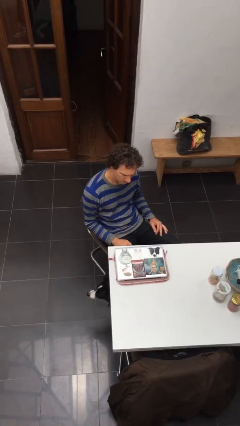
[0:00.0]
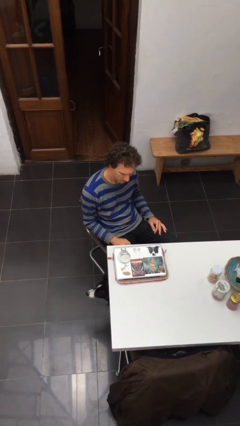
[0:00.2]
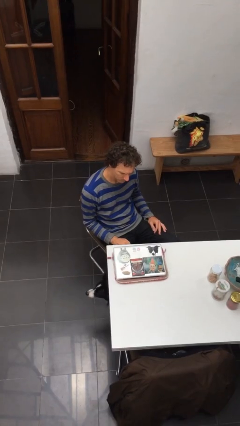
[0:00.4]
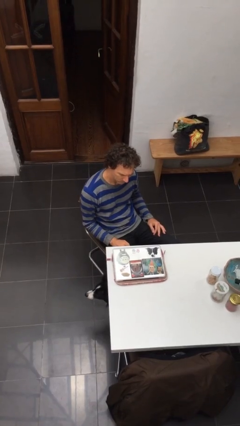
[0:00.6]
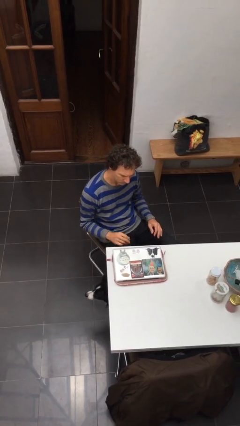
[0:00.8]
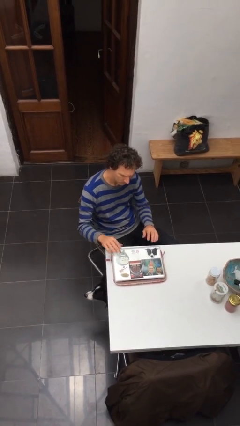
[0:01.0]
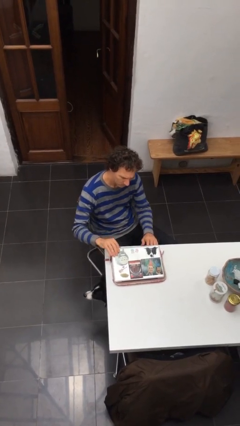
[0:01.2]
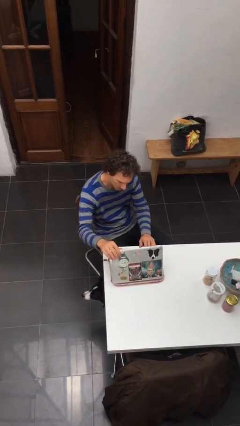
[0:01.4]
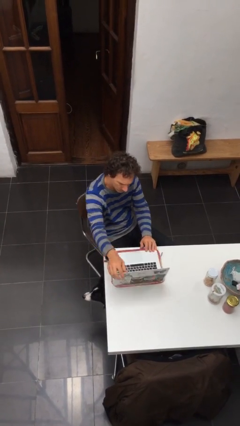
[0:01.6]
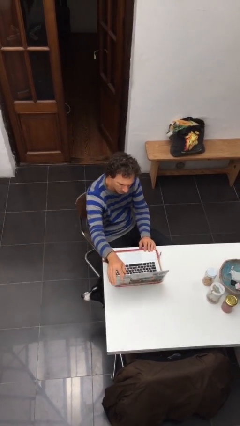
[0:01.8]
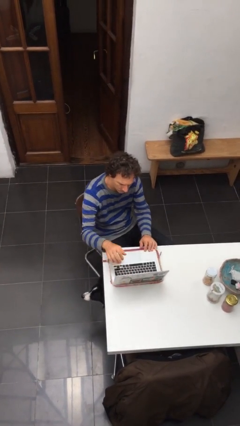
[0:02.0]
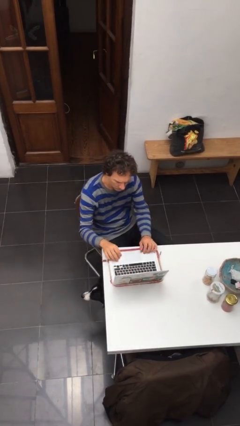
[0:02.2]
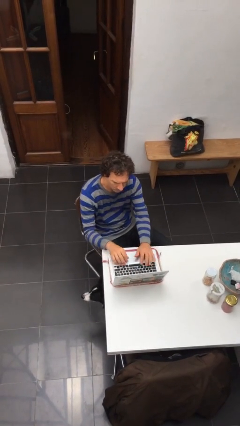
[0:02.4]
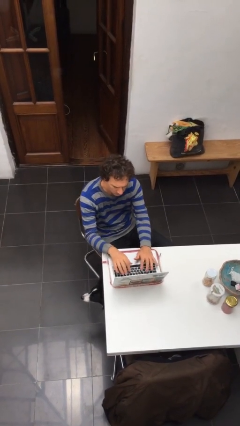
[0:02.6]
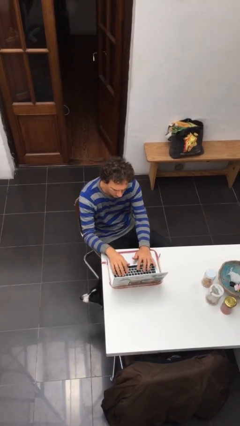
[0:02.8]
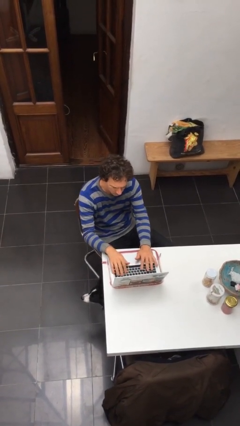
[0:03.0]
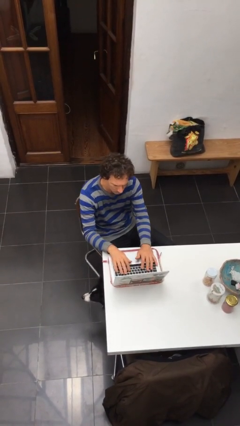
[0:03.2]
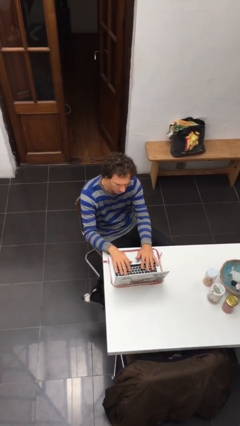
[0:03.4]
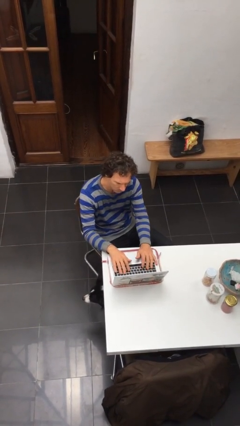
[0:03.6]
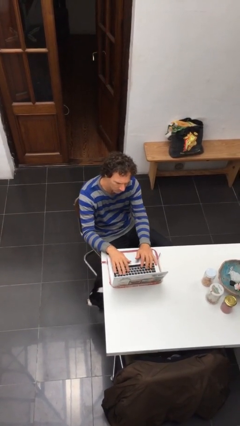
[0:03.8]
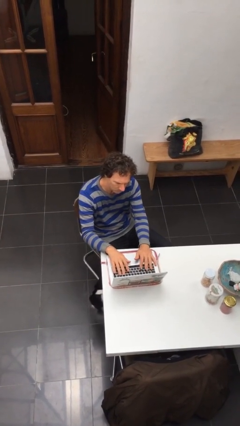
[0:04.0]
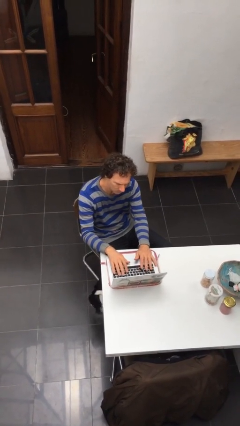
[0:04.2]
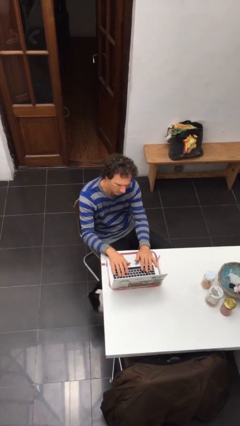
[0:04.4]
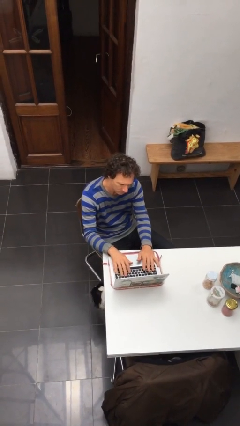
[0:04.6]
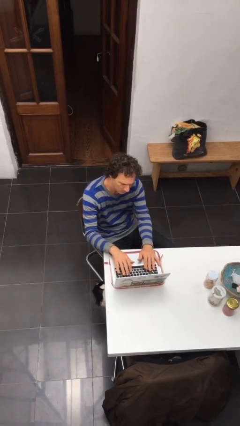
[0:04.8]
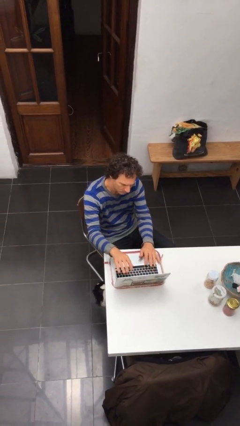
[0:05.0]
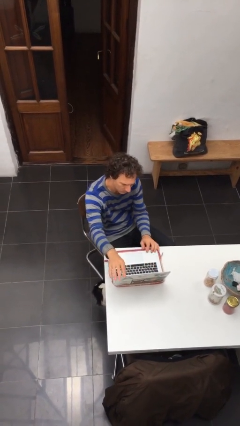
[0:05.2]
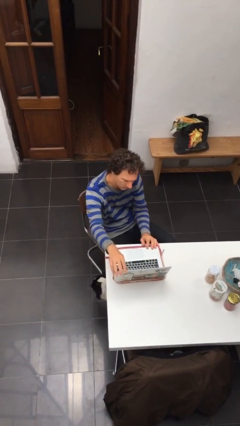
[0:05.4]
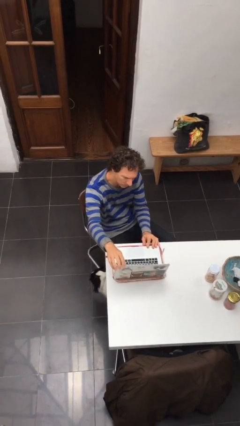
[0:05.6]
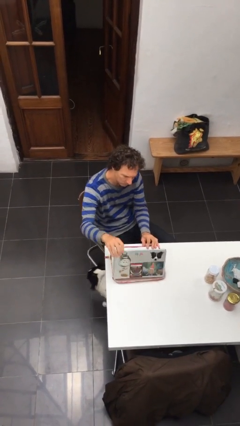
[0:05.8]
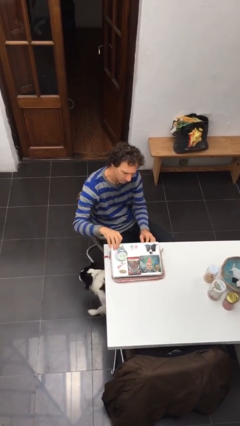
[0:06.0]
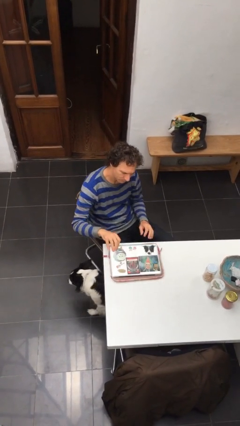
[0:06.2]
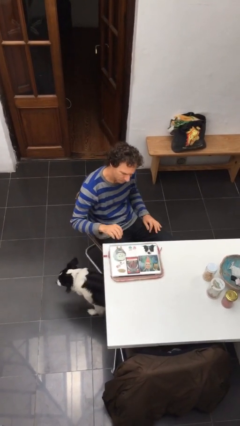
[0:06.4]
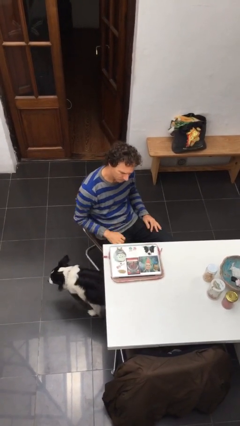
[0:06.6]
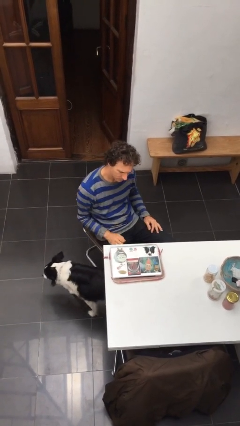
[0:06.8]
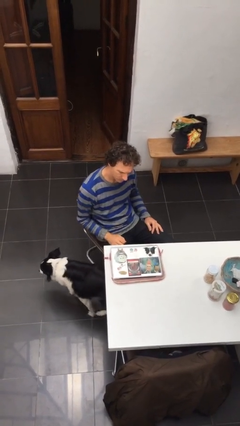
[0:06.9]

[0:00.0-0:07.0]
person interacts with laptop

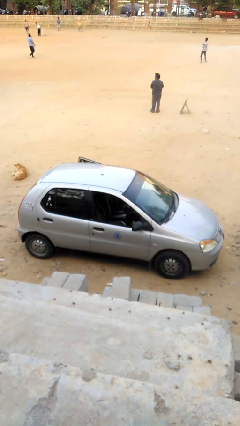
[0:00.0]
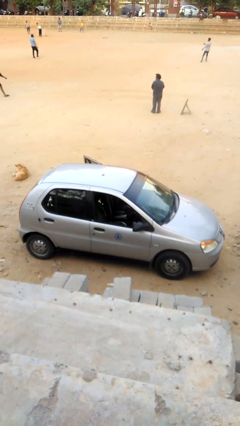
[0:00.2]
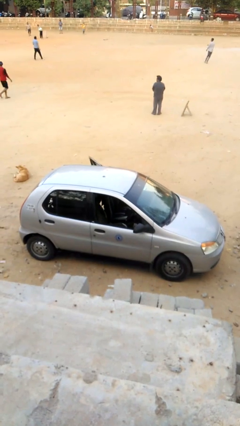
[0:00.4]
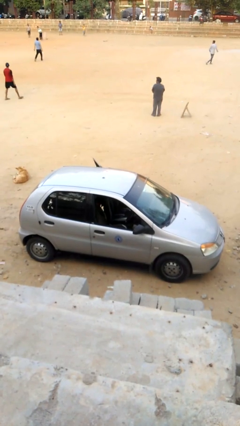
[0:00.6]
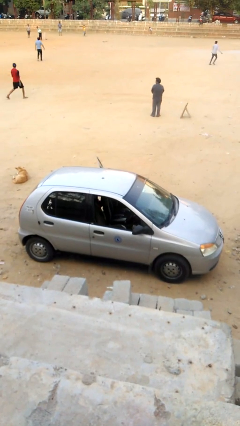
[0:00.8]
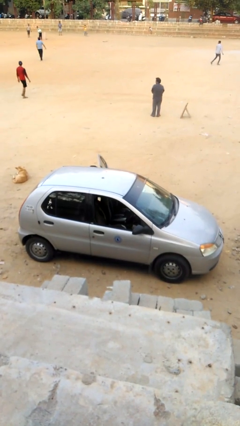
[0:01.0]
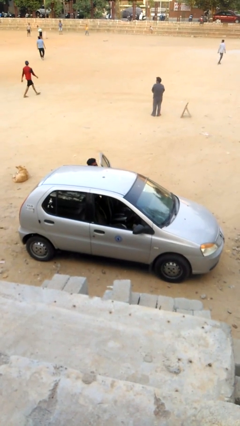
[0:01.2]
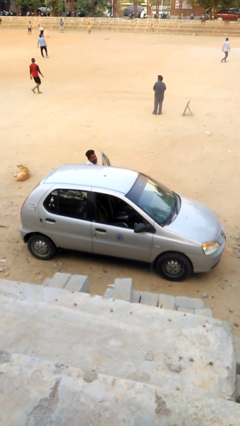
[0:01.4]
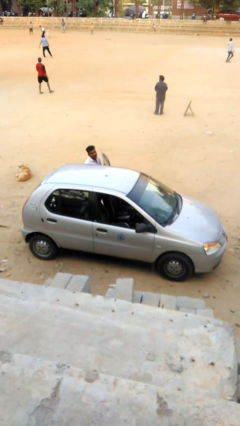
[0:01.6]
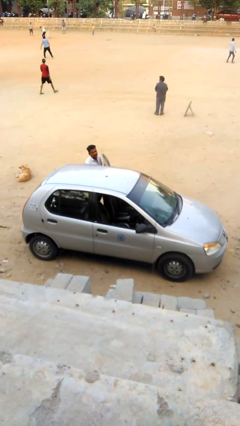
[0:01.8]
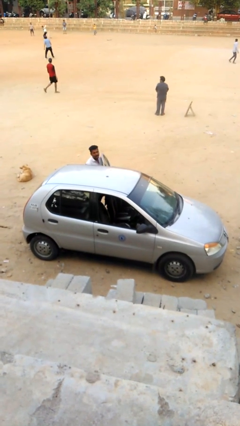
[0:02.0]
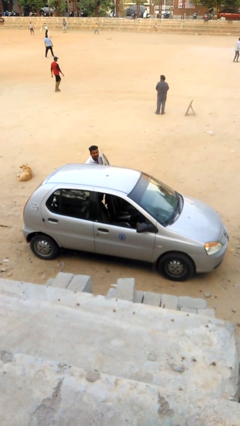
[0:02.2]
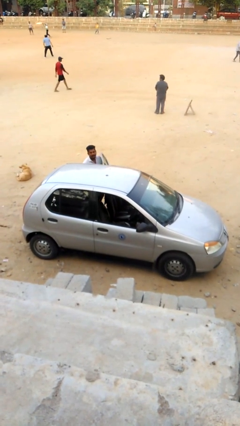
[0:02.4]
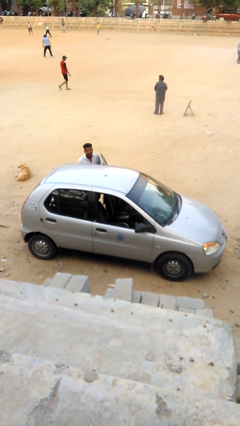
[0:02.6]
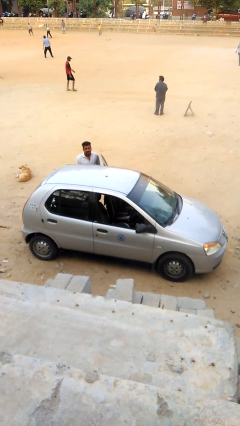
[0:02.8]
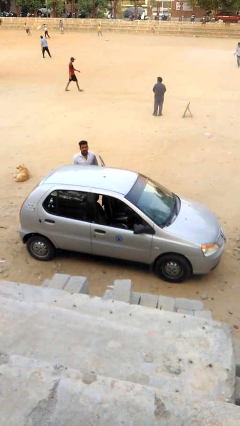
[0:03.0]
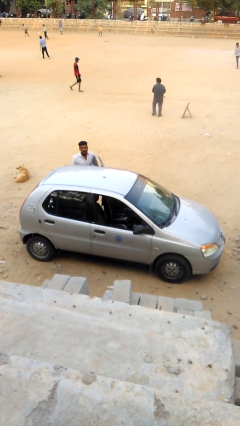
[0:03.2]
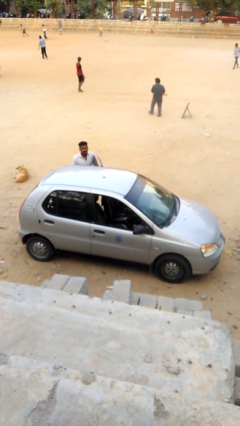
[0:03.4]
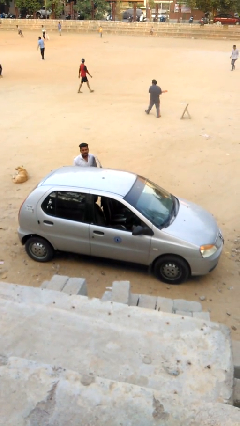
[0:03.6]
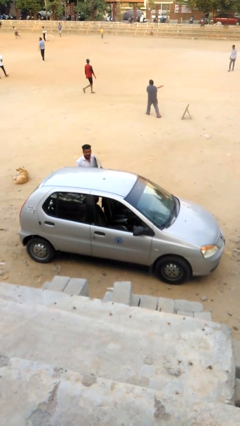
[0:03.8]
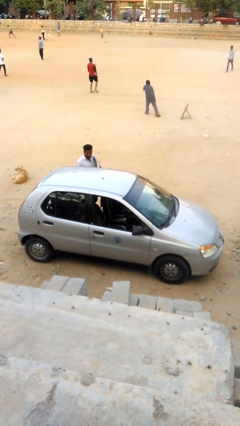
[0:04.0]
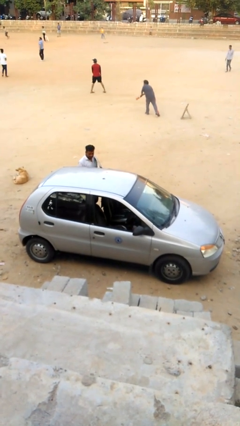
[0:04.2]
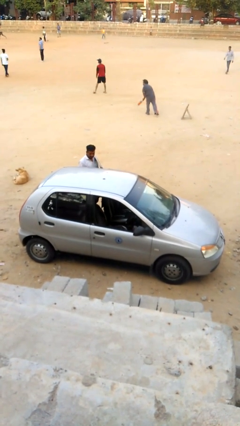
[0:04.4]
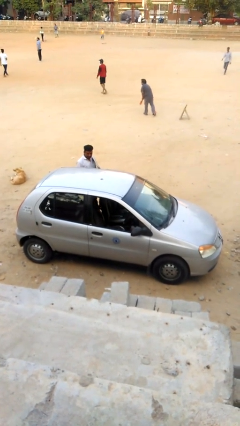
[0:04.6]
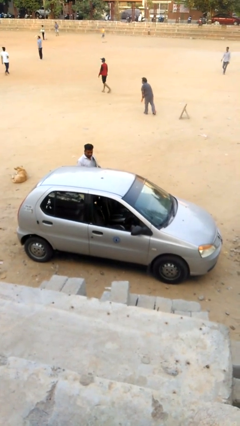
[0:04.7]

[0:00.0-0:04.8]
car drops off person

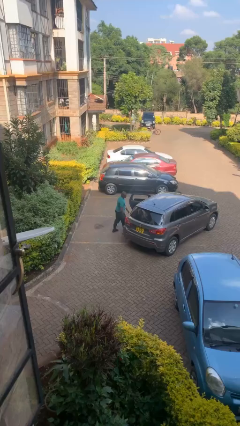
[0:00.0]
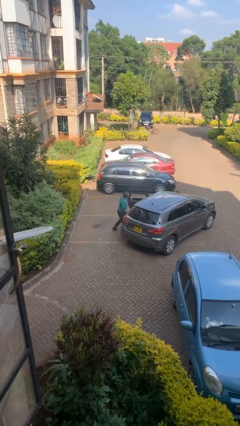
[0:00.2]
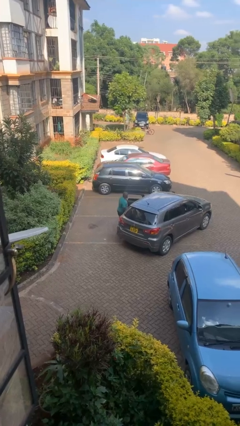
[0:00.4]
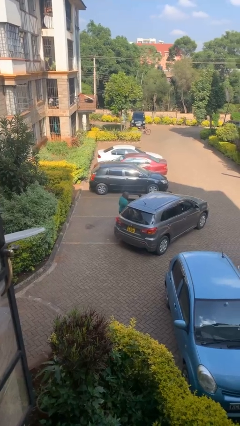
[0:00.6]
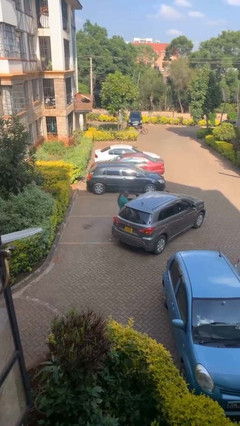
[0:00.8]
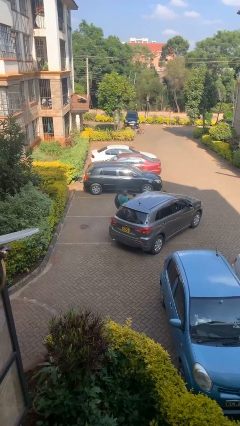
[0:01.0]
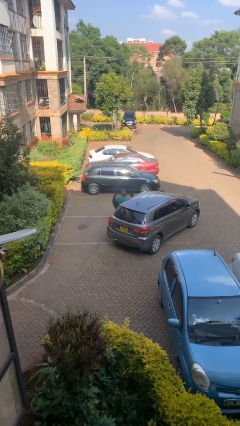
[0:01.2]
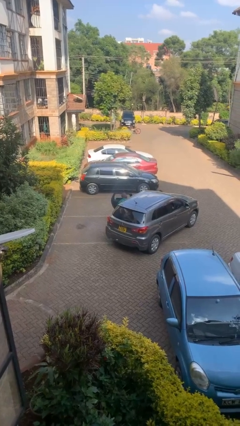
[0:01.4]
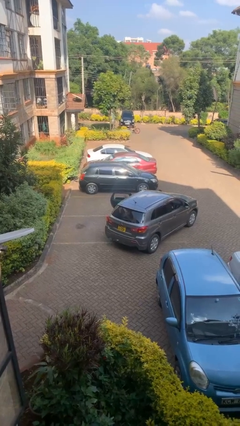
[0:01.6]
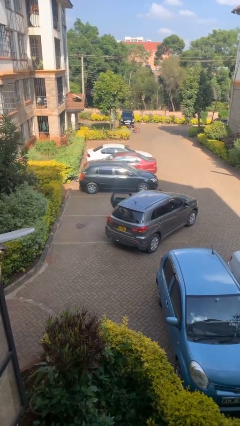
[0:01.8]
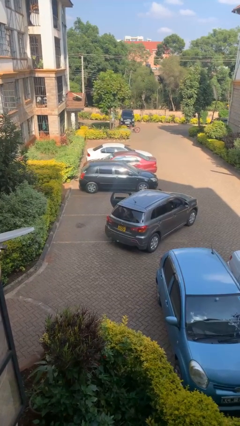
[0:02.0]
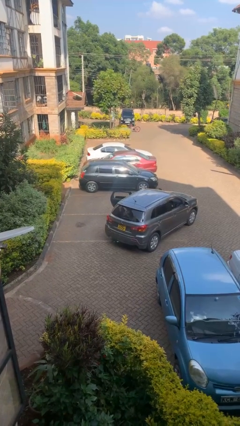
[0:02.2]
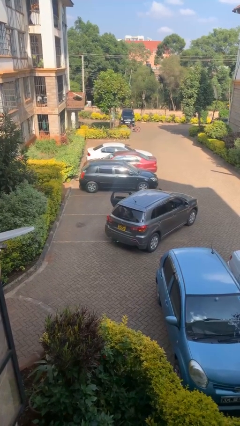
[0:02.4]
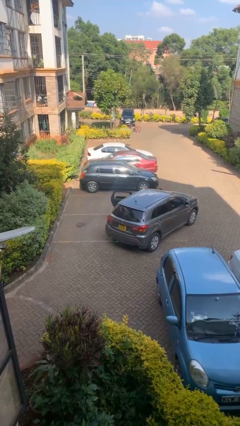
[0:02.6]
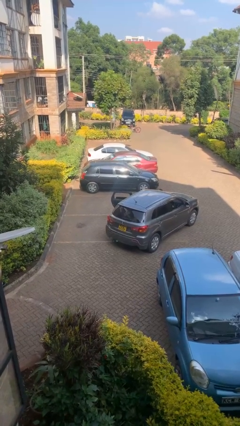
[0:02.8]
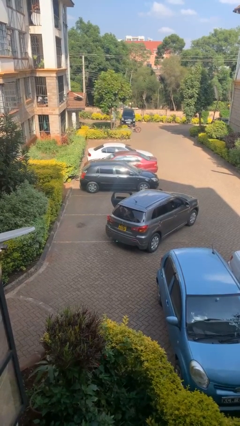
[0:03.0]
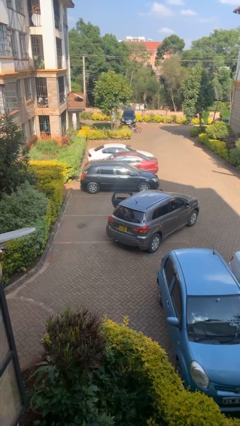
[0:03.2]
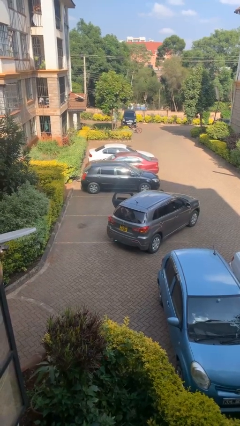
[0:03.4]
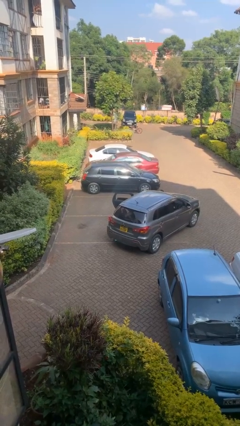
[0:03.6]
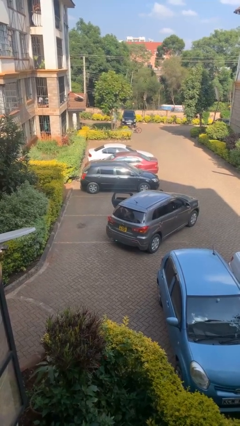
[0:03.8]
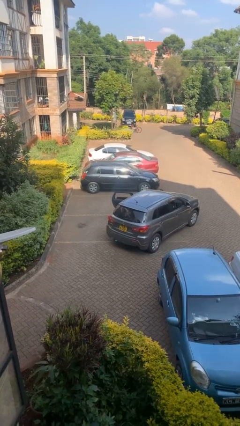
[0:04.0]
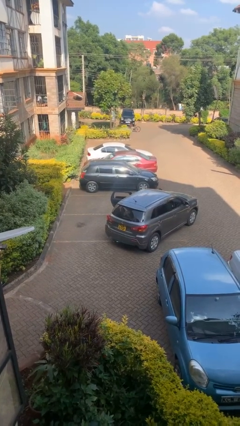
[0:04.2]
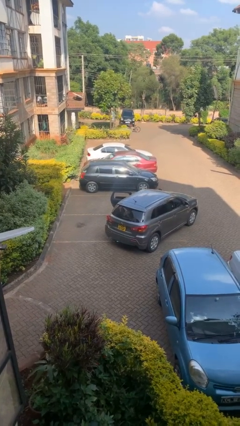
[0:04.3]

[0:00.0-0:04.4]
person enters car

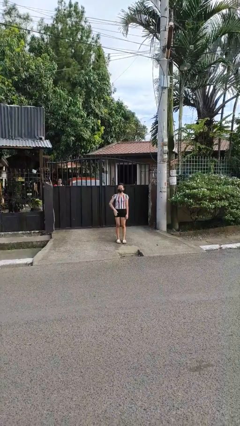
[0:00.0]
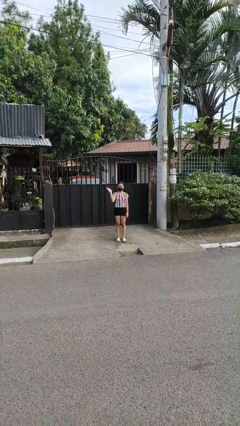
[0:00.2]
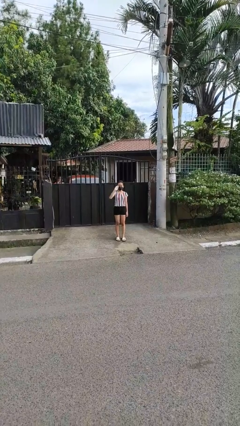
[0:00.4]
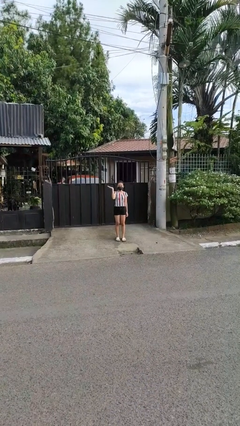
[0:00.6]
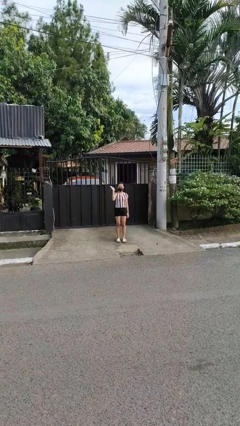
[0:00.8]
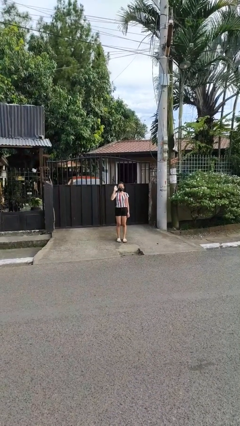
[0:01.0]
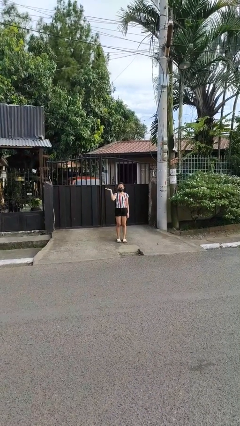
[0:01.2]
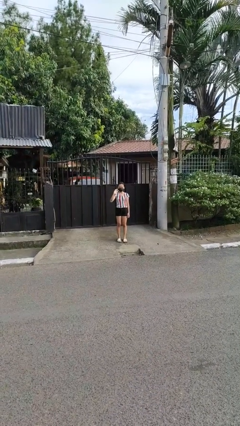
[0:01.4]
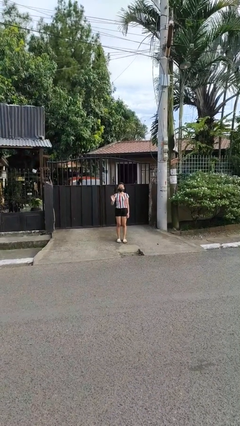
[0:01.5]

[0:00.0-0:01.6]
person waves at person
